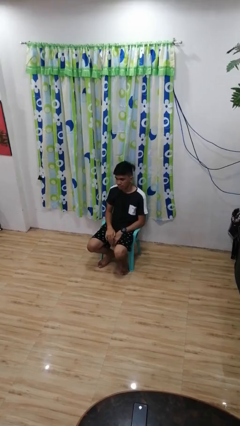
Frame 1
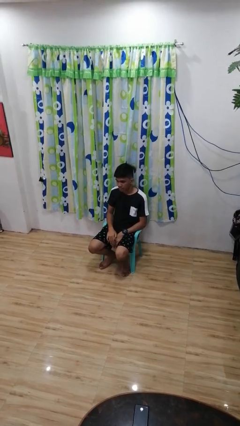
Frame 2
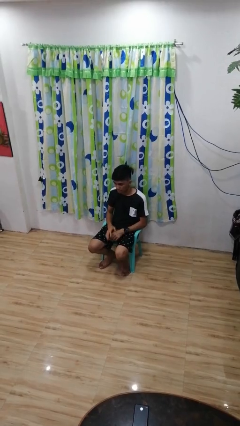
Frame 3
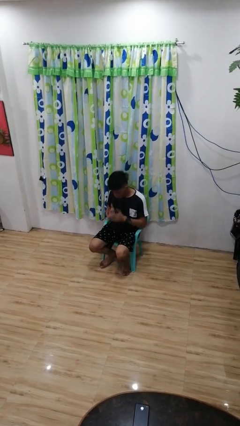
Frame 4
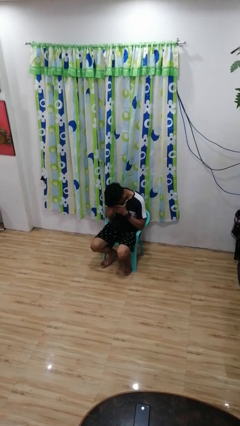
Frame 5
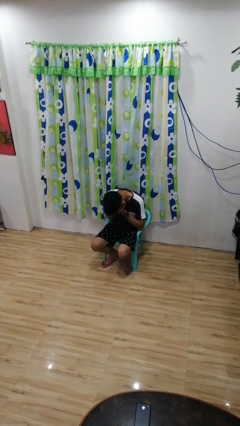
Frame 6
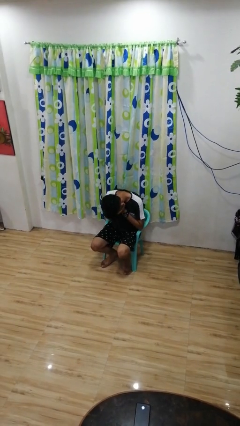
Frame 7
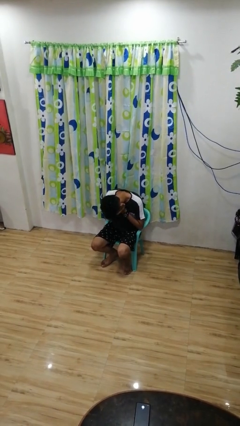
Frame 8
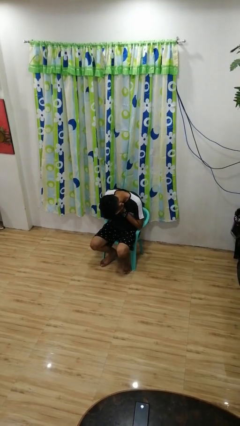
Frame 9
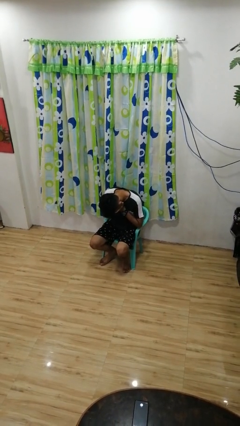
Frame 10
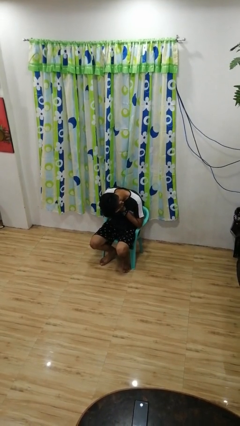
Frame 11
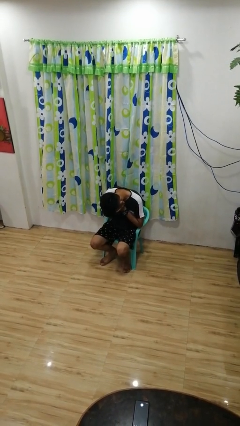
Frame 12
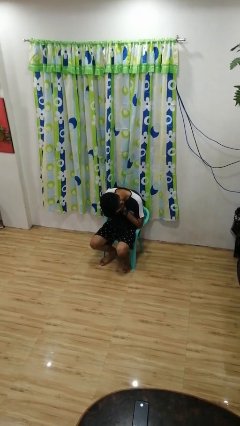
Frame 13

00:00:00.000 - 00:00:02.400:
person covers face with hands

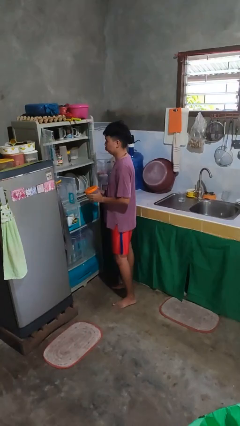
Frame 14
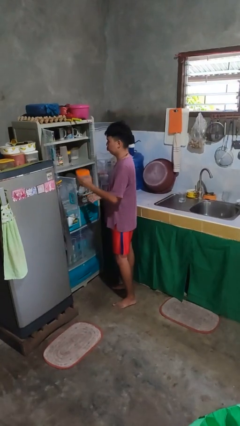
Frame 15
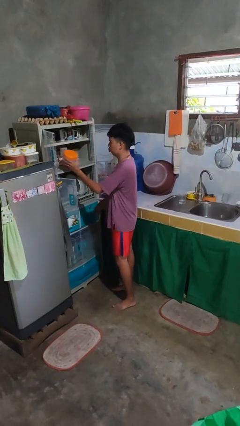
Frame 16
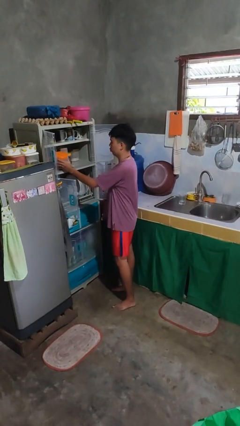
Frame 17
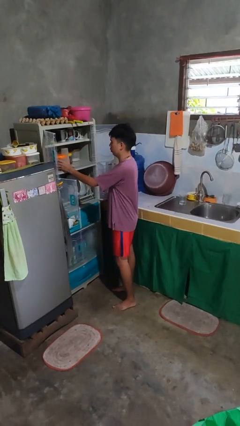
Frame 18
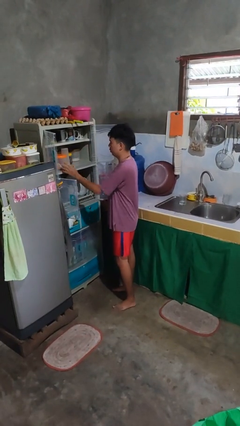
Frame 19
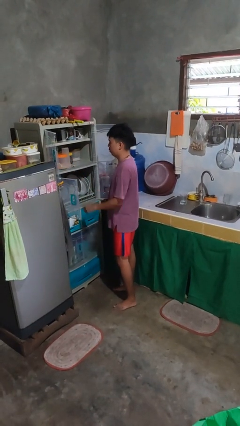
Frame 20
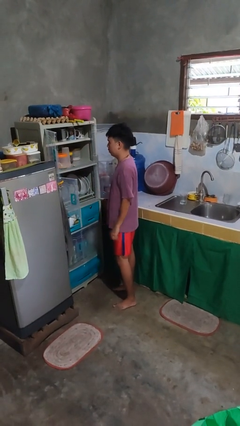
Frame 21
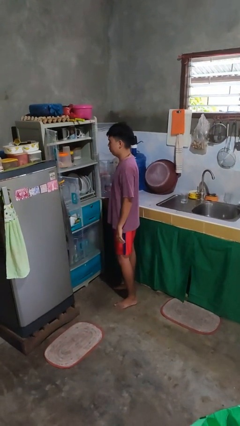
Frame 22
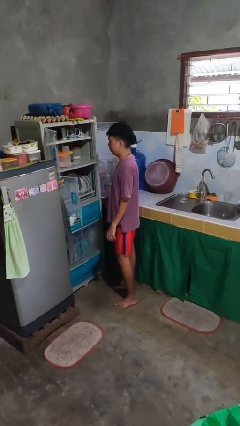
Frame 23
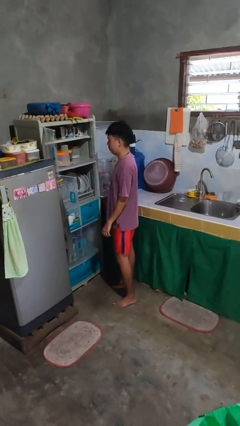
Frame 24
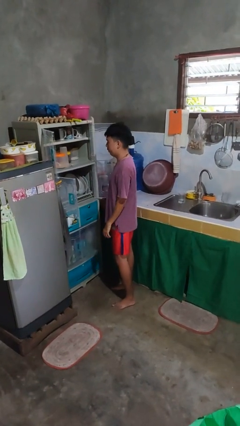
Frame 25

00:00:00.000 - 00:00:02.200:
person puts object in cabinet

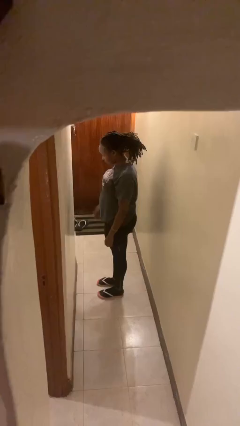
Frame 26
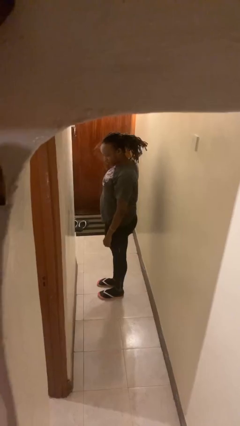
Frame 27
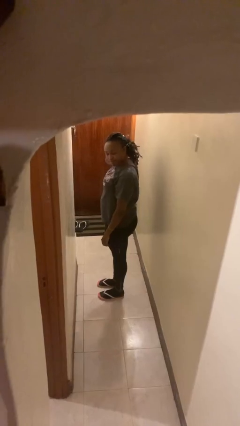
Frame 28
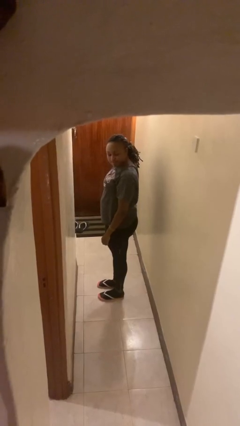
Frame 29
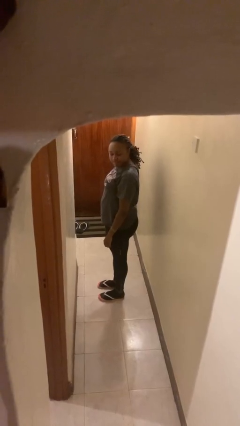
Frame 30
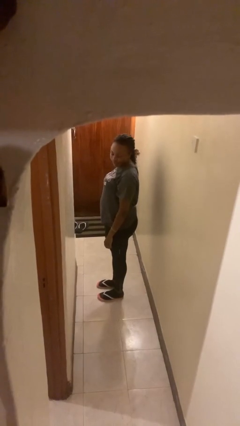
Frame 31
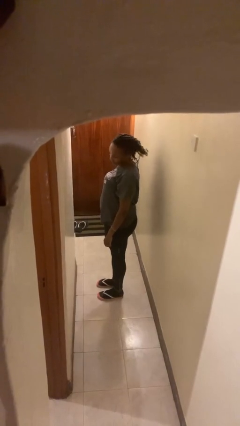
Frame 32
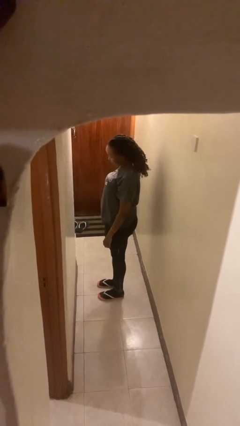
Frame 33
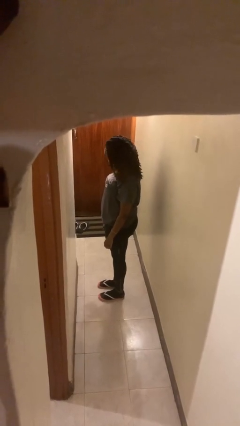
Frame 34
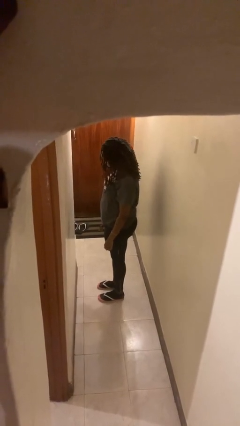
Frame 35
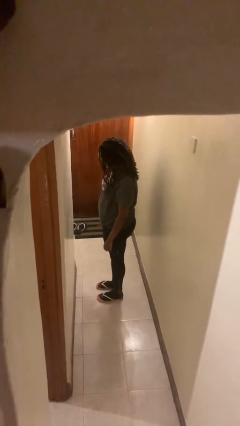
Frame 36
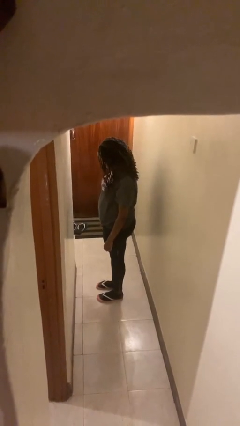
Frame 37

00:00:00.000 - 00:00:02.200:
person takes off hairtie

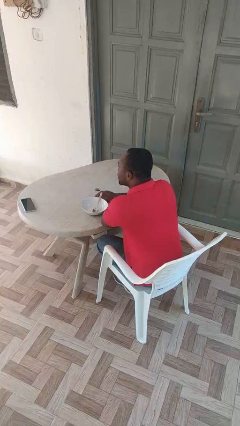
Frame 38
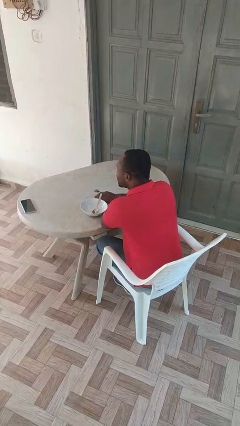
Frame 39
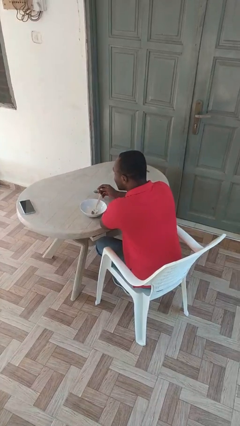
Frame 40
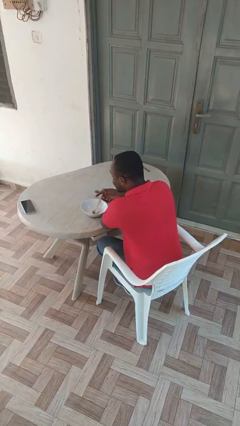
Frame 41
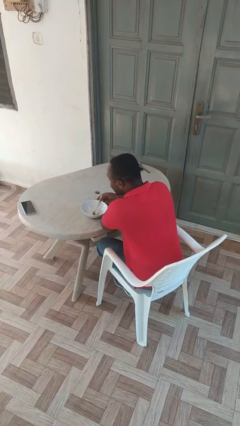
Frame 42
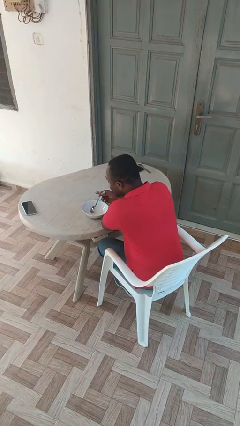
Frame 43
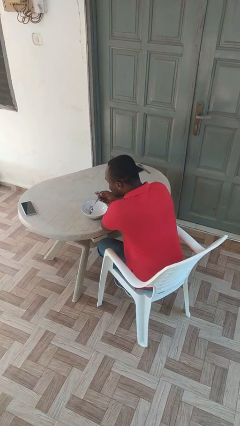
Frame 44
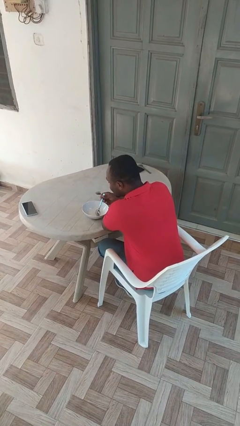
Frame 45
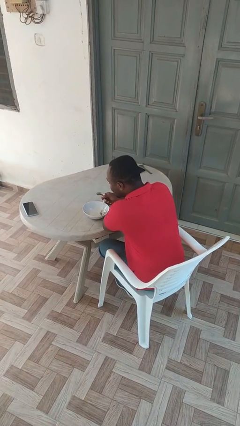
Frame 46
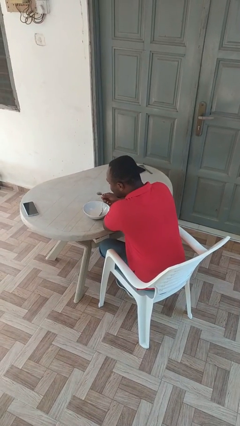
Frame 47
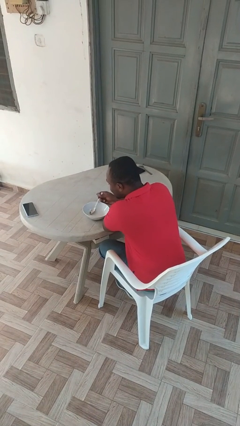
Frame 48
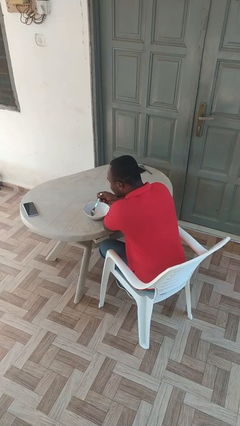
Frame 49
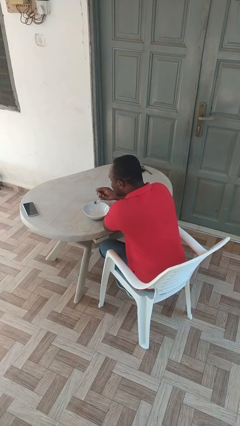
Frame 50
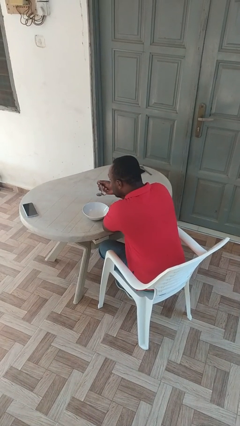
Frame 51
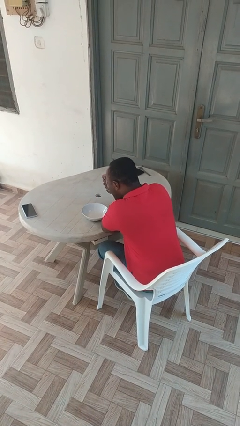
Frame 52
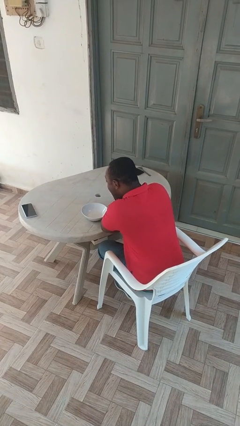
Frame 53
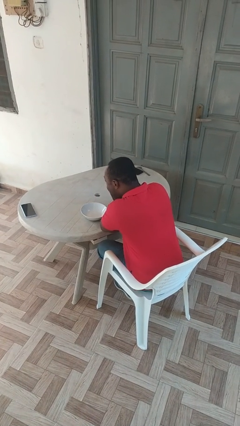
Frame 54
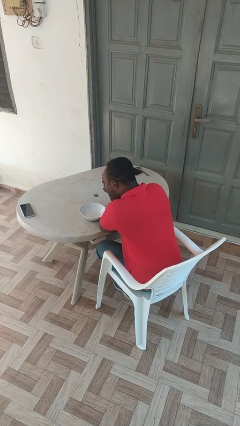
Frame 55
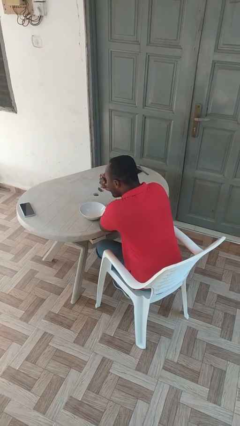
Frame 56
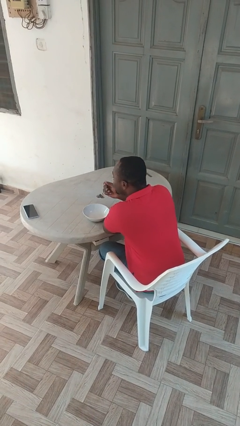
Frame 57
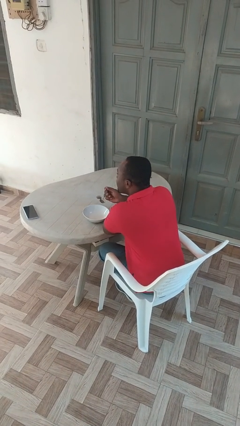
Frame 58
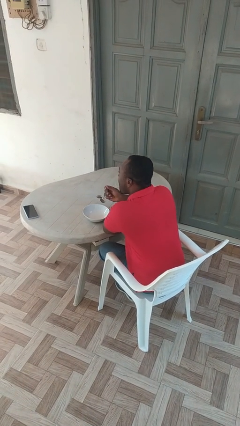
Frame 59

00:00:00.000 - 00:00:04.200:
person eats with utensil

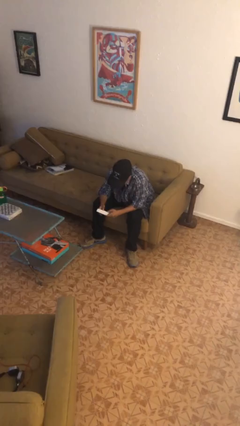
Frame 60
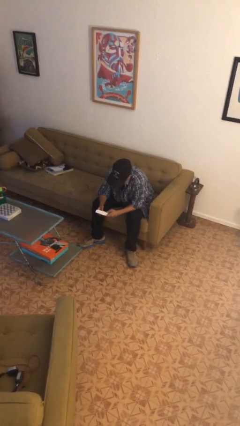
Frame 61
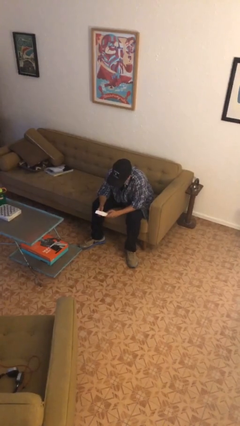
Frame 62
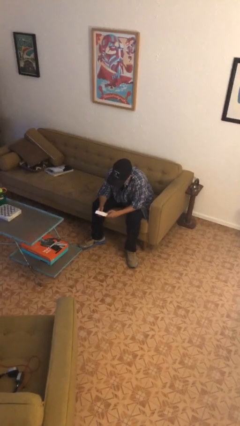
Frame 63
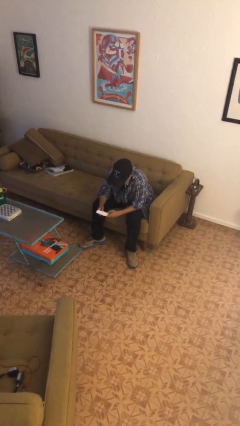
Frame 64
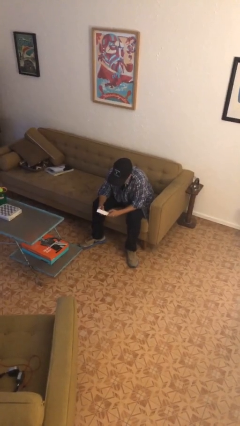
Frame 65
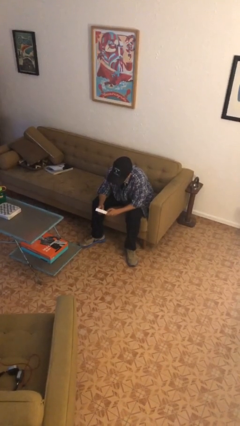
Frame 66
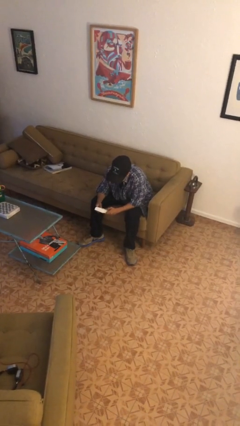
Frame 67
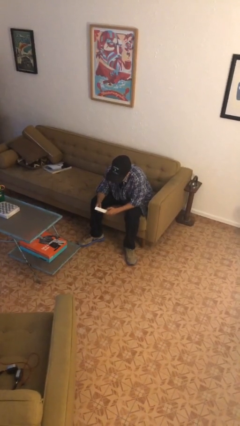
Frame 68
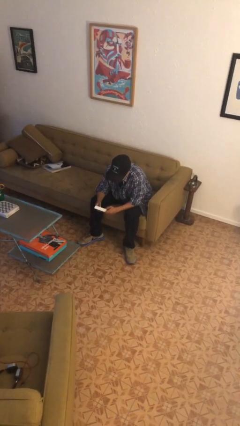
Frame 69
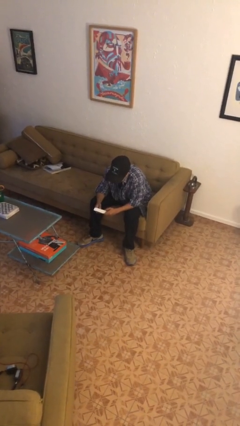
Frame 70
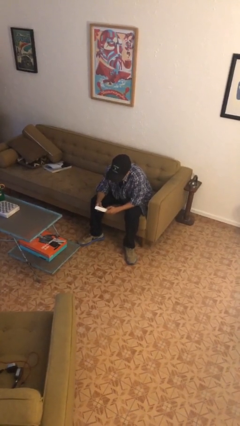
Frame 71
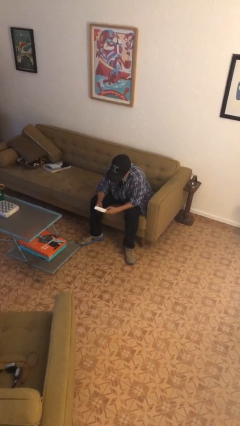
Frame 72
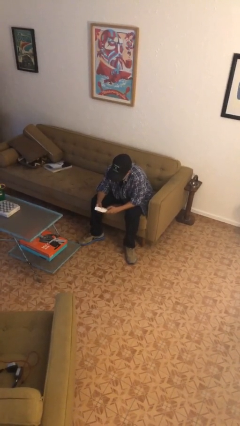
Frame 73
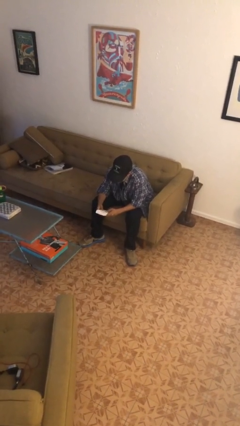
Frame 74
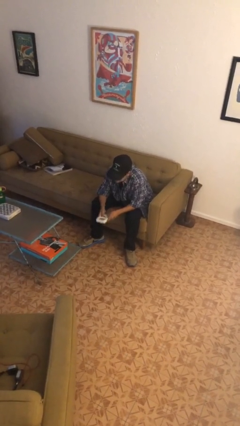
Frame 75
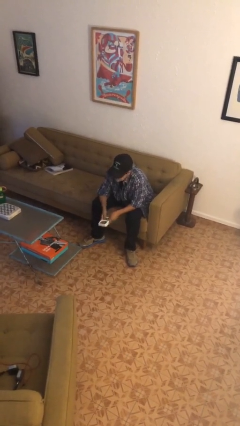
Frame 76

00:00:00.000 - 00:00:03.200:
person interacts with handheld game

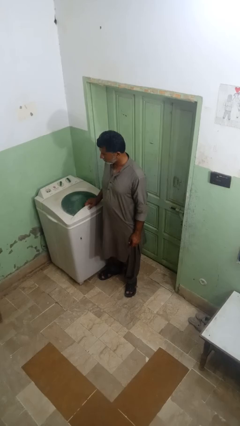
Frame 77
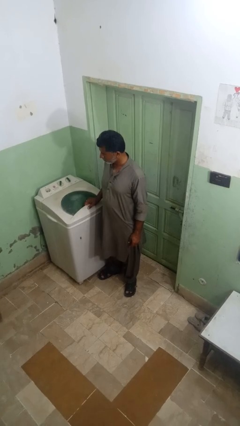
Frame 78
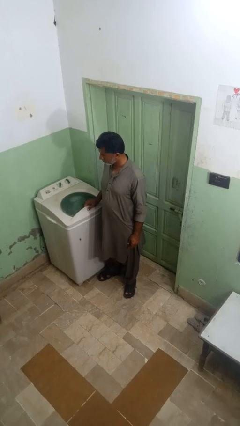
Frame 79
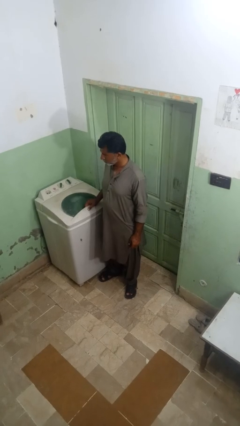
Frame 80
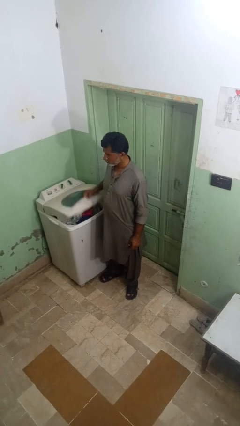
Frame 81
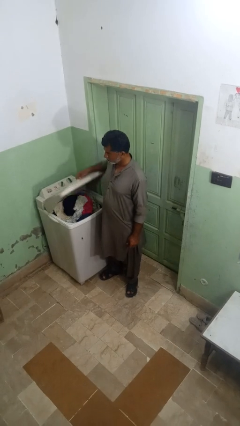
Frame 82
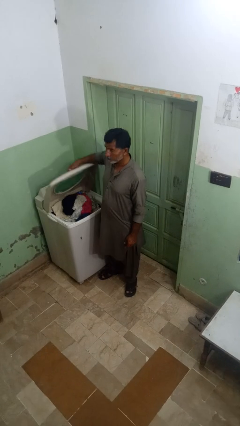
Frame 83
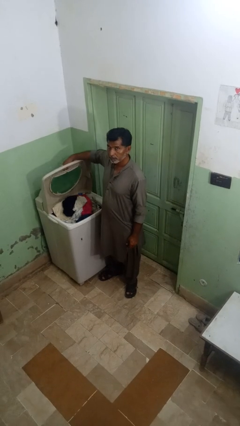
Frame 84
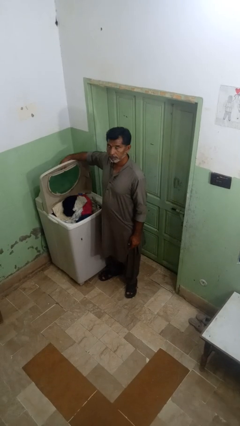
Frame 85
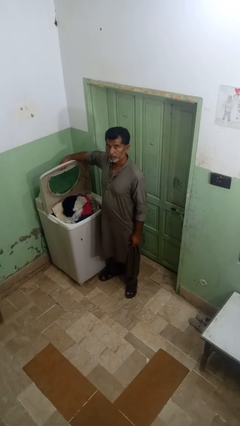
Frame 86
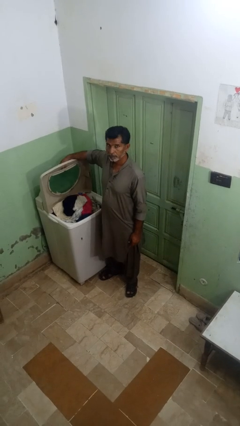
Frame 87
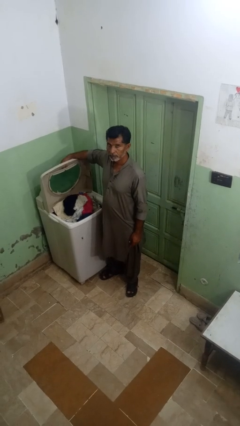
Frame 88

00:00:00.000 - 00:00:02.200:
person opens clothes washer

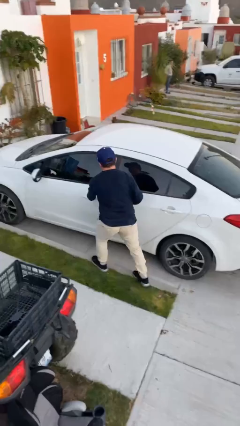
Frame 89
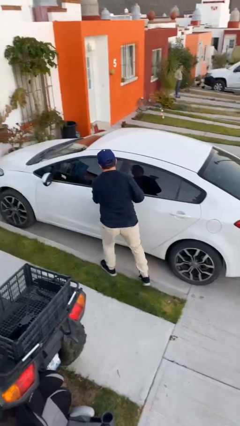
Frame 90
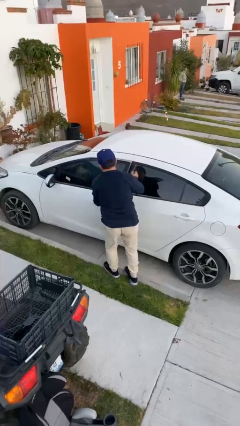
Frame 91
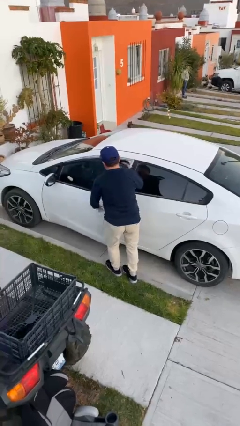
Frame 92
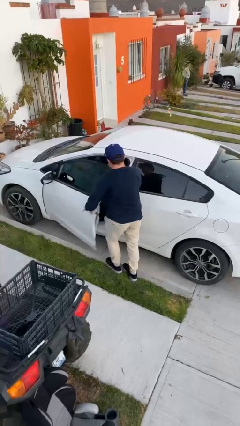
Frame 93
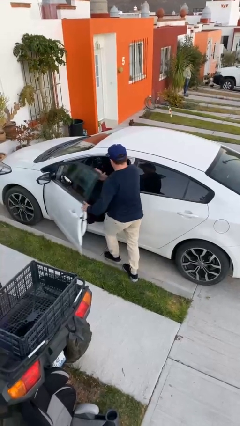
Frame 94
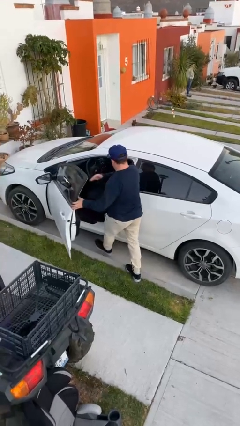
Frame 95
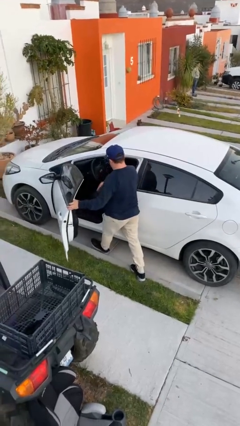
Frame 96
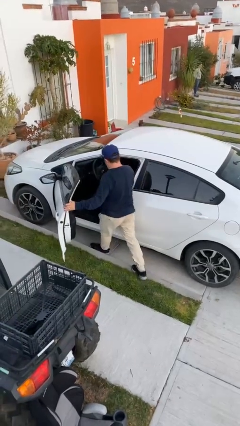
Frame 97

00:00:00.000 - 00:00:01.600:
person opens car door
